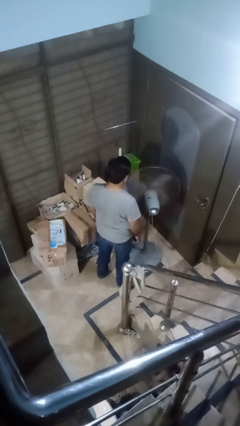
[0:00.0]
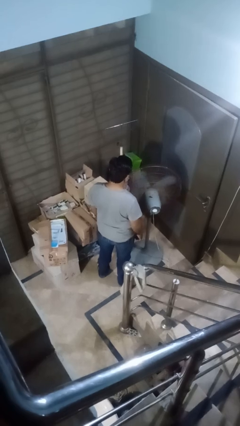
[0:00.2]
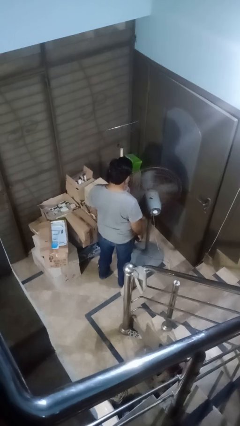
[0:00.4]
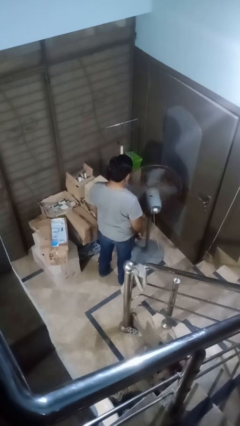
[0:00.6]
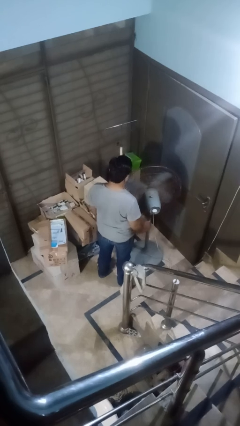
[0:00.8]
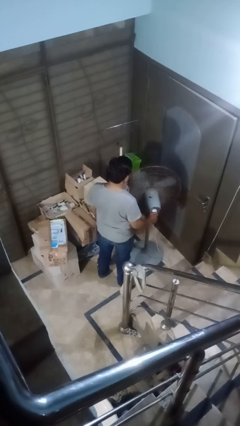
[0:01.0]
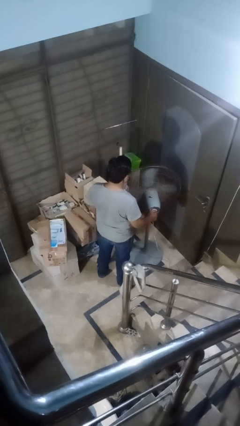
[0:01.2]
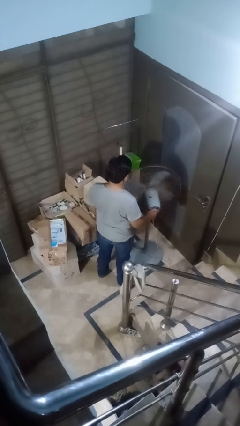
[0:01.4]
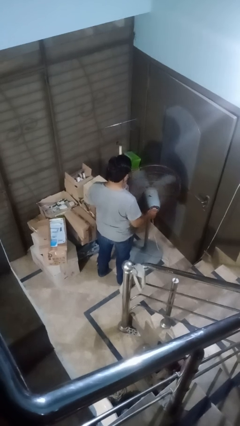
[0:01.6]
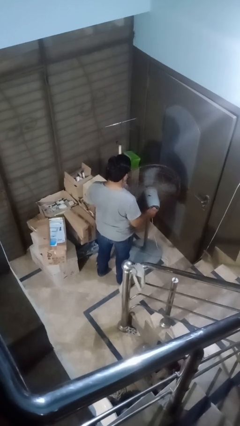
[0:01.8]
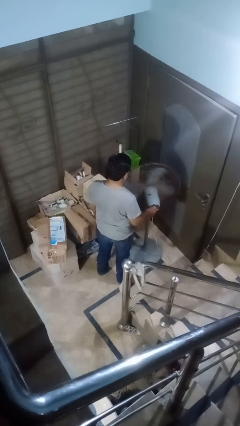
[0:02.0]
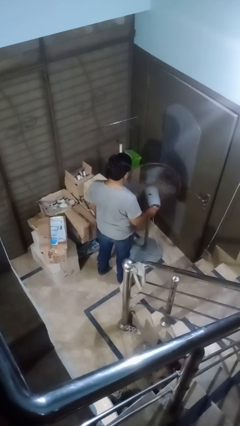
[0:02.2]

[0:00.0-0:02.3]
person turns on fan

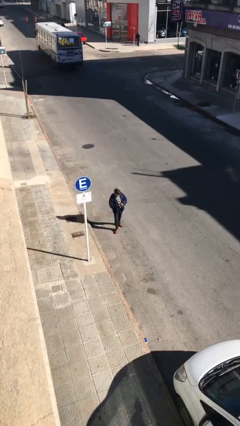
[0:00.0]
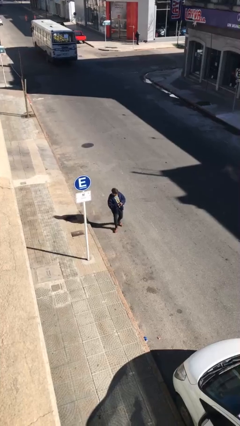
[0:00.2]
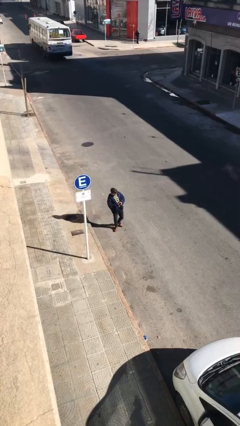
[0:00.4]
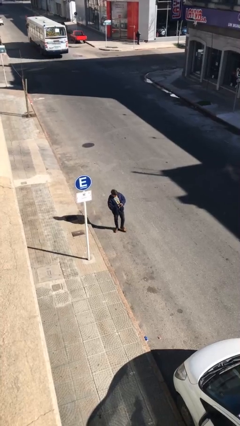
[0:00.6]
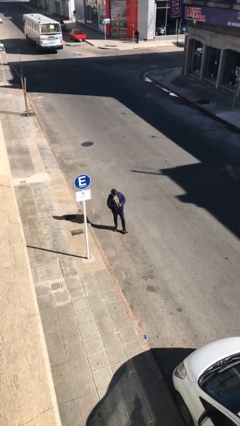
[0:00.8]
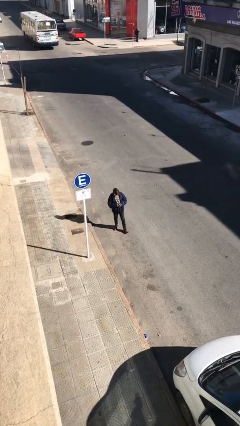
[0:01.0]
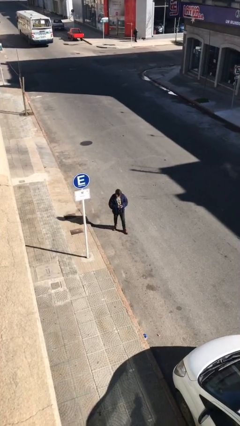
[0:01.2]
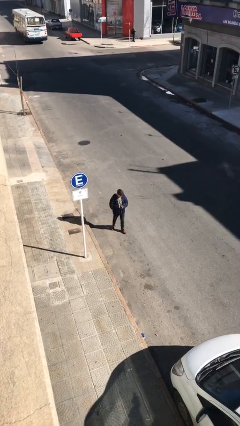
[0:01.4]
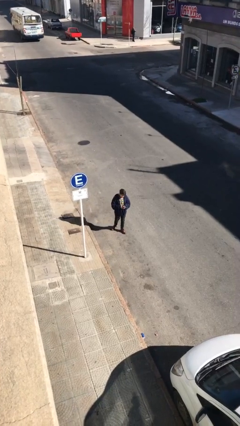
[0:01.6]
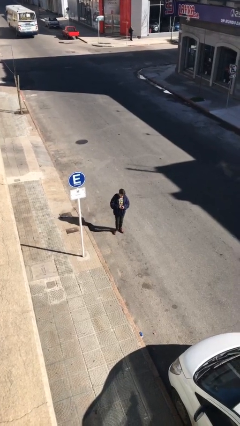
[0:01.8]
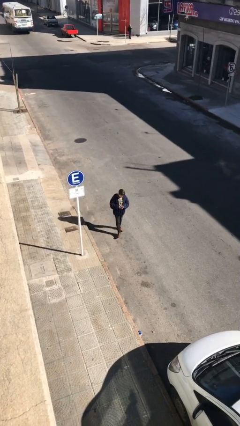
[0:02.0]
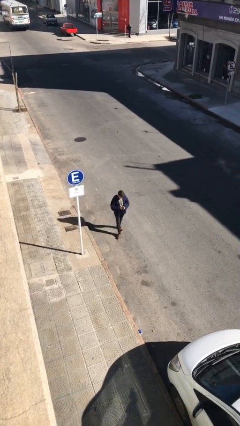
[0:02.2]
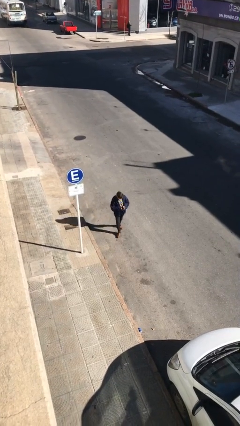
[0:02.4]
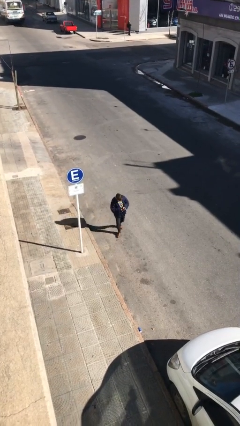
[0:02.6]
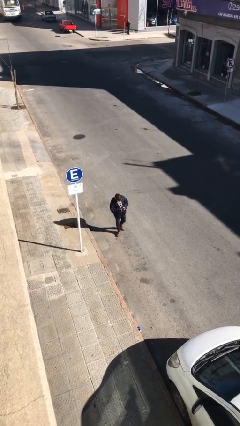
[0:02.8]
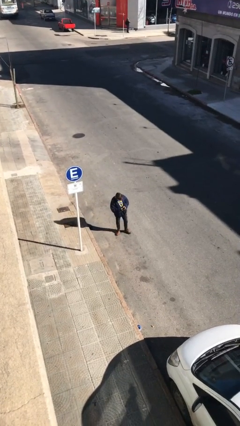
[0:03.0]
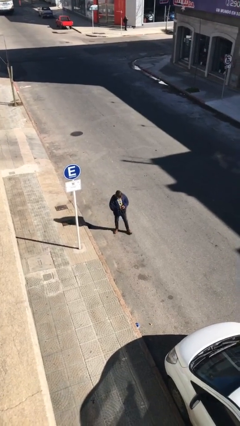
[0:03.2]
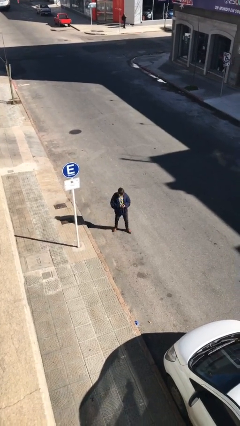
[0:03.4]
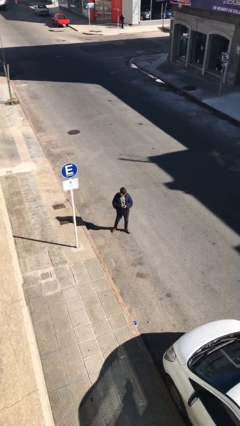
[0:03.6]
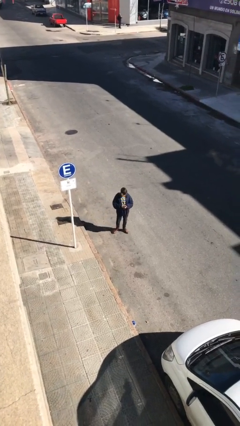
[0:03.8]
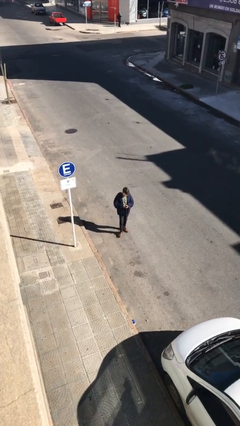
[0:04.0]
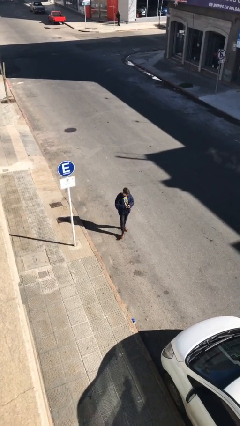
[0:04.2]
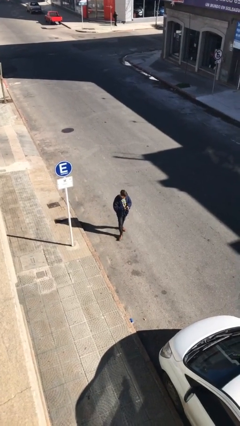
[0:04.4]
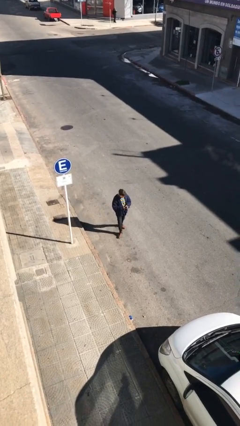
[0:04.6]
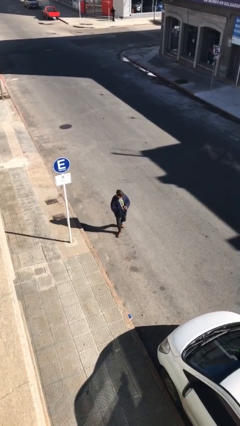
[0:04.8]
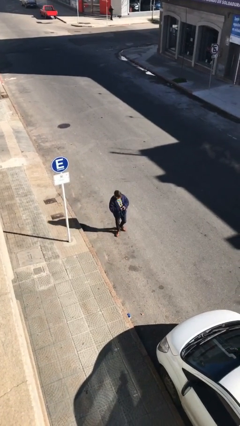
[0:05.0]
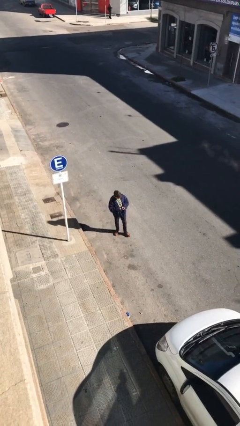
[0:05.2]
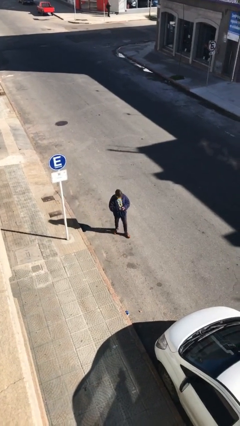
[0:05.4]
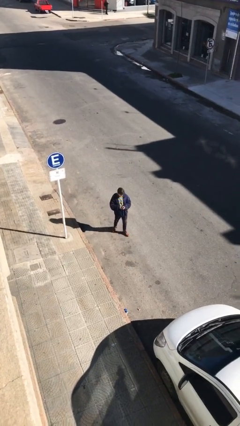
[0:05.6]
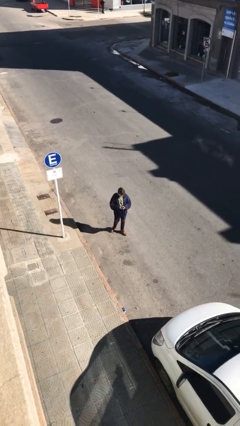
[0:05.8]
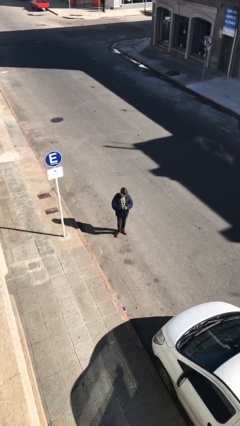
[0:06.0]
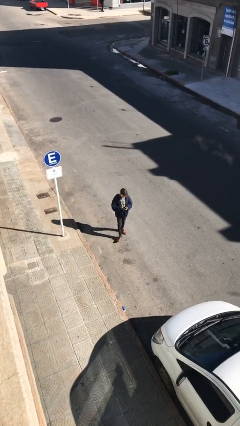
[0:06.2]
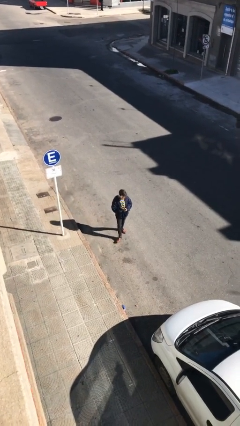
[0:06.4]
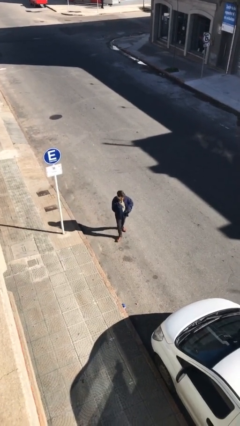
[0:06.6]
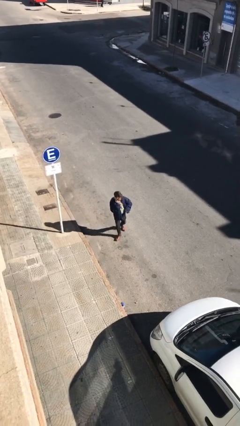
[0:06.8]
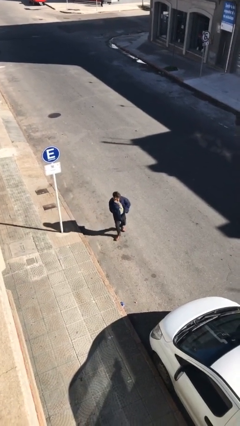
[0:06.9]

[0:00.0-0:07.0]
person texts on phone

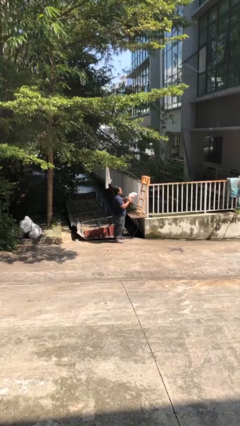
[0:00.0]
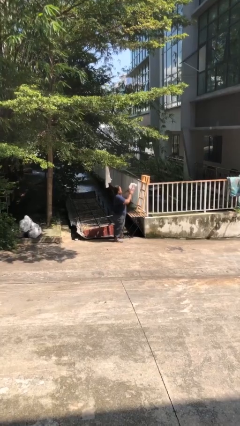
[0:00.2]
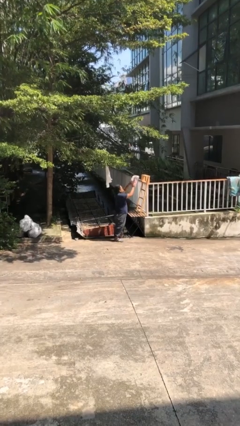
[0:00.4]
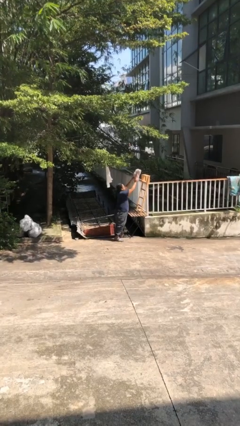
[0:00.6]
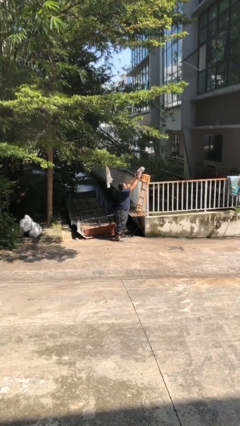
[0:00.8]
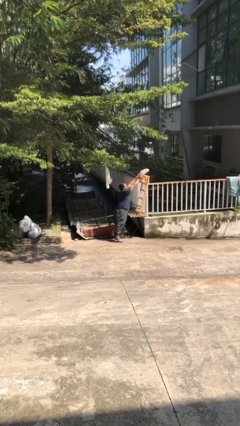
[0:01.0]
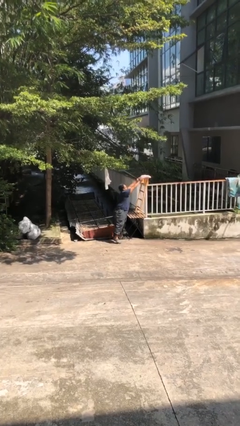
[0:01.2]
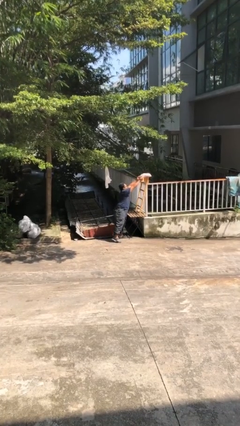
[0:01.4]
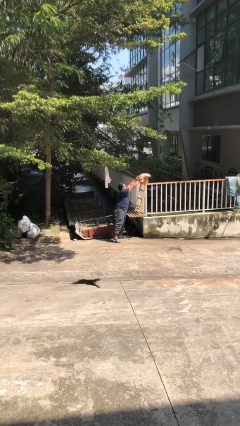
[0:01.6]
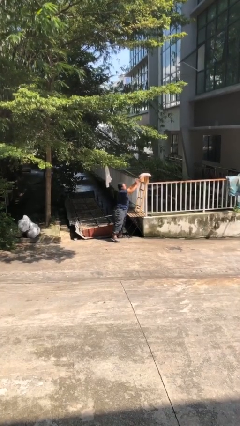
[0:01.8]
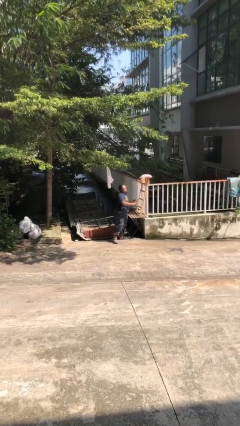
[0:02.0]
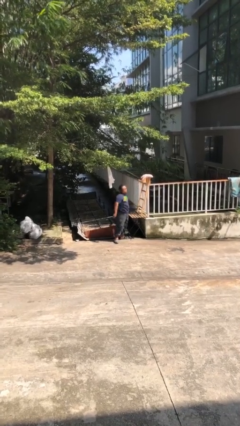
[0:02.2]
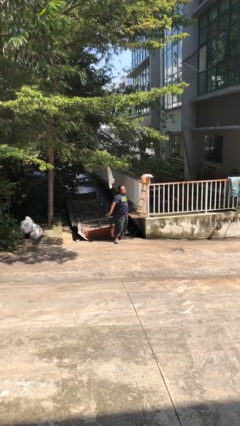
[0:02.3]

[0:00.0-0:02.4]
person puts down object on shelf

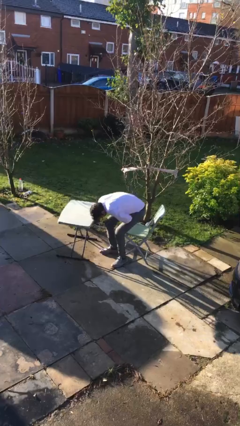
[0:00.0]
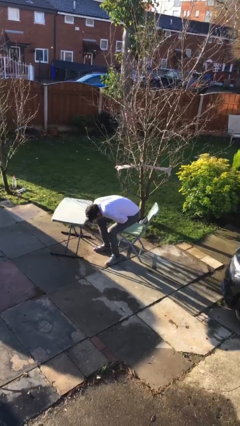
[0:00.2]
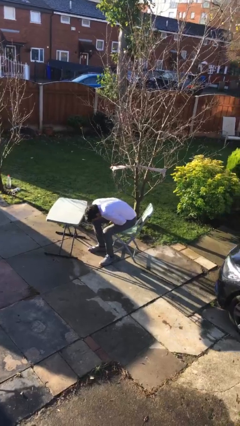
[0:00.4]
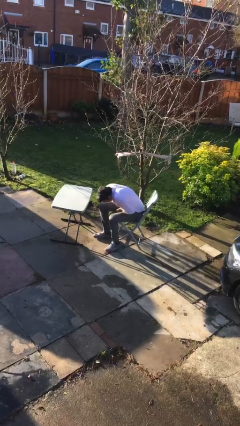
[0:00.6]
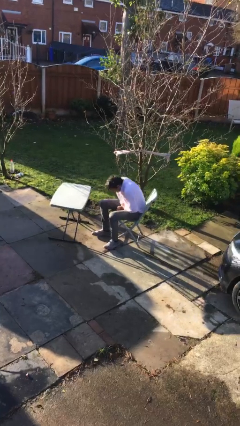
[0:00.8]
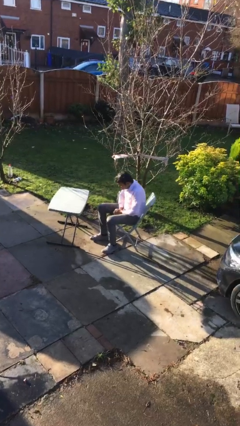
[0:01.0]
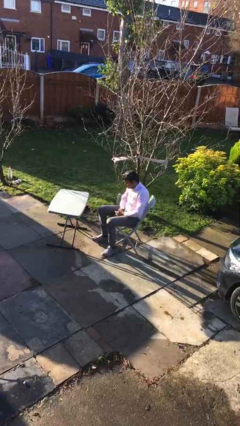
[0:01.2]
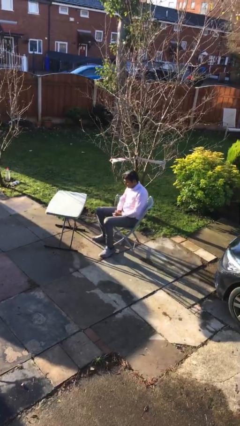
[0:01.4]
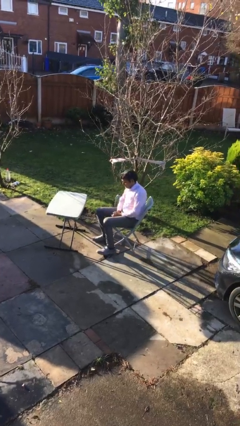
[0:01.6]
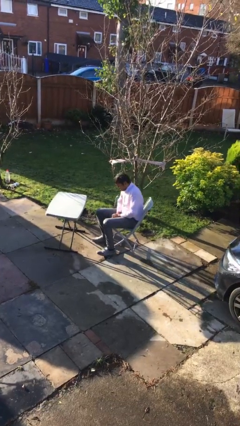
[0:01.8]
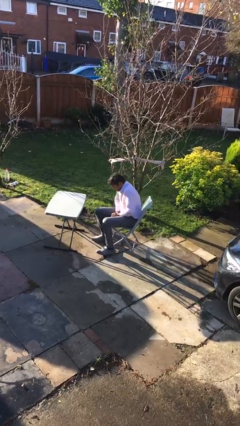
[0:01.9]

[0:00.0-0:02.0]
person sits down

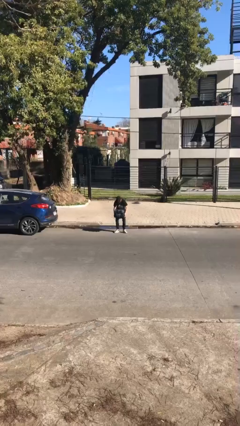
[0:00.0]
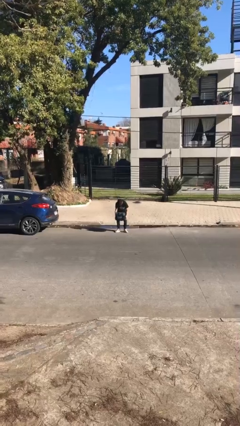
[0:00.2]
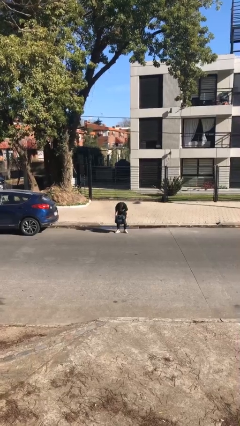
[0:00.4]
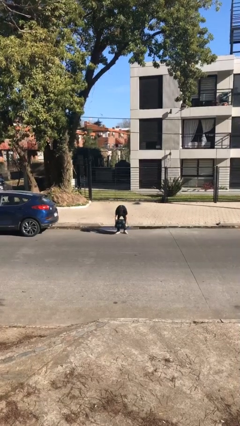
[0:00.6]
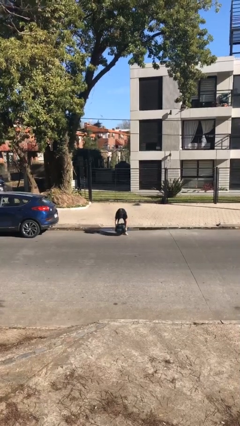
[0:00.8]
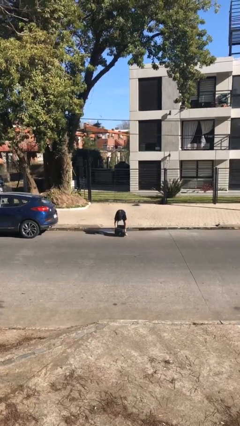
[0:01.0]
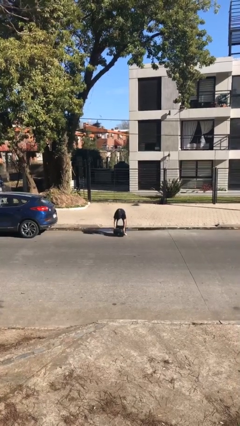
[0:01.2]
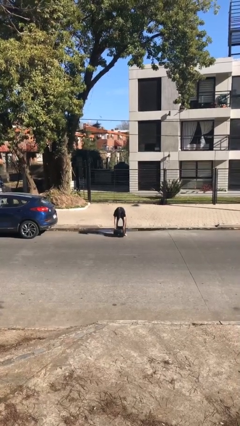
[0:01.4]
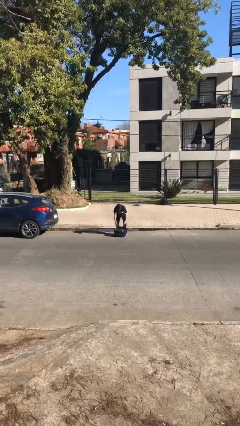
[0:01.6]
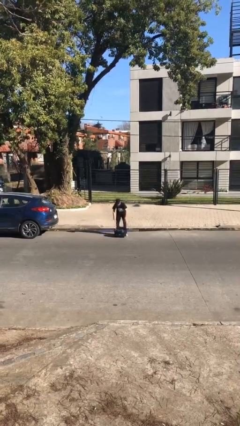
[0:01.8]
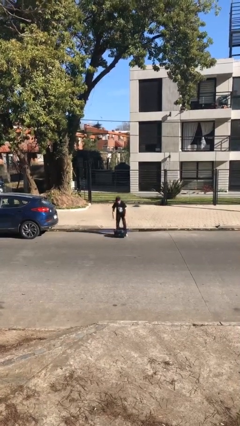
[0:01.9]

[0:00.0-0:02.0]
person puts down object on floor

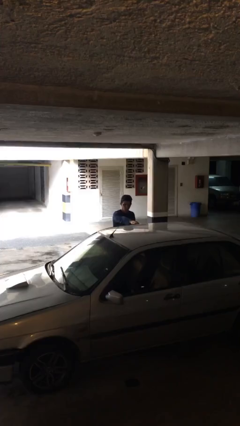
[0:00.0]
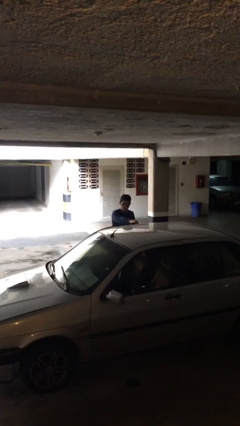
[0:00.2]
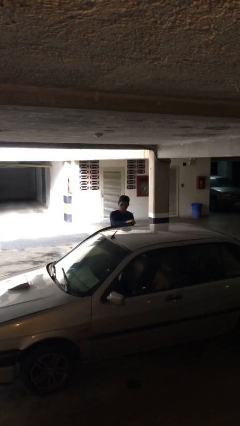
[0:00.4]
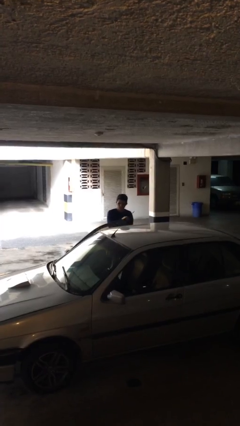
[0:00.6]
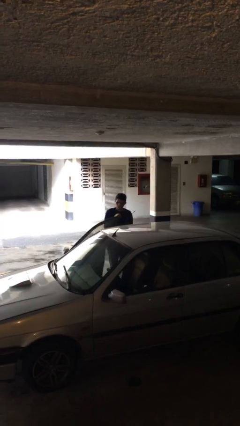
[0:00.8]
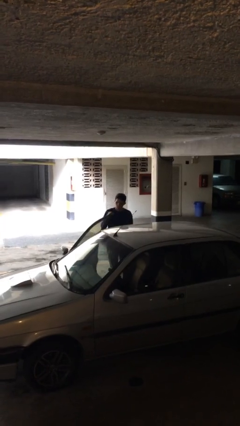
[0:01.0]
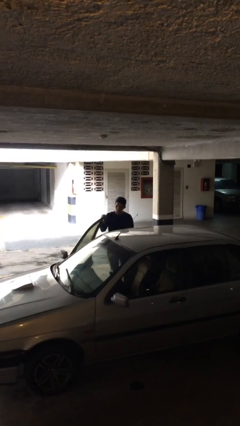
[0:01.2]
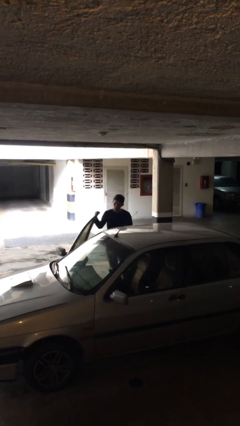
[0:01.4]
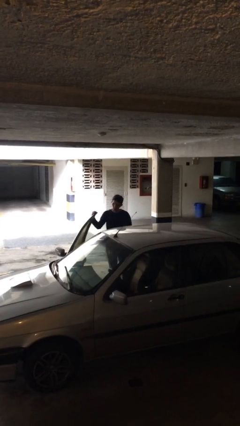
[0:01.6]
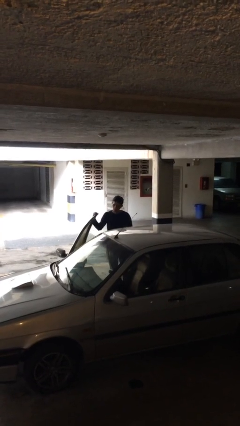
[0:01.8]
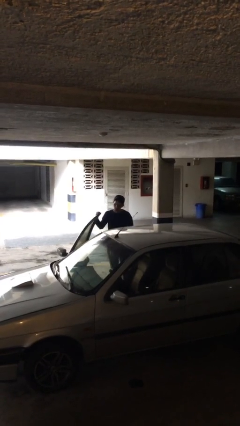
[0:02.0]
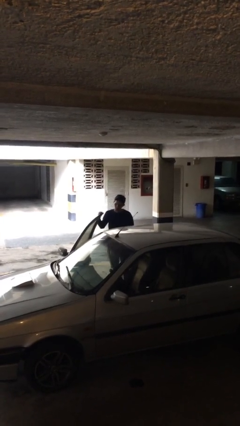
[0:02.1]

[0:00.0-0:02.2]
person opens car door
